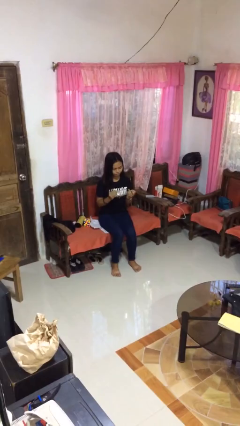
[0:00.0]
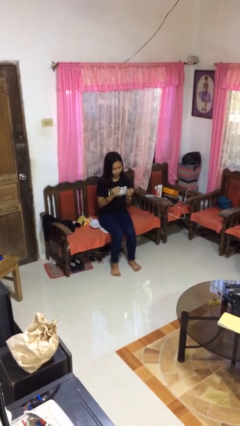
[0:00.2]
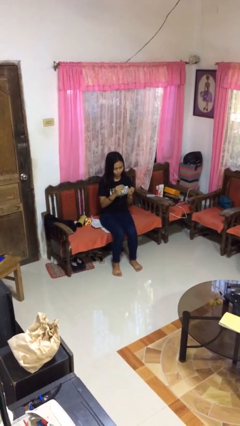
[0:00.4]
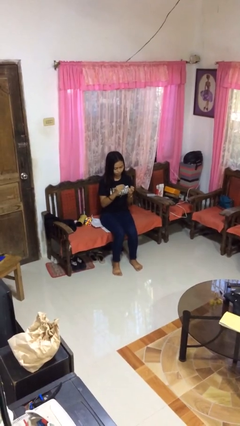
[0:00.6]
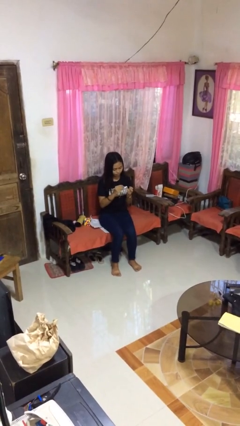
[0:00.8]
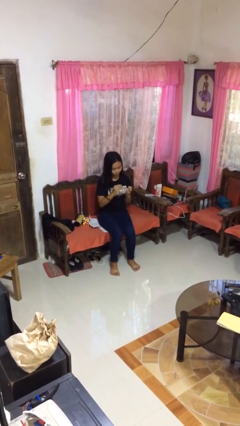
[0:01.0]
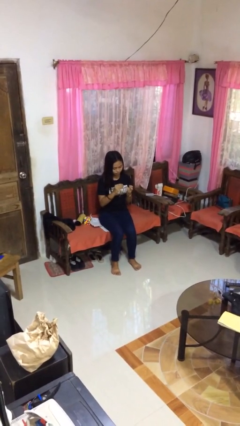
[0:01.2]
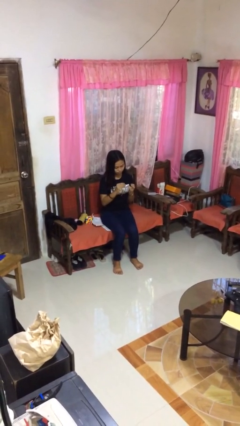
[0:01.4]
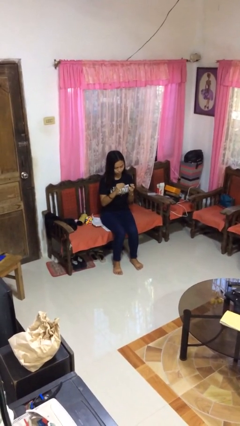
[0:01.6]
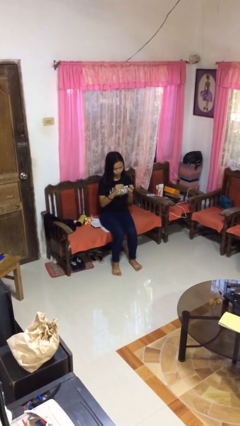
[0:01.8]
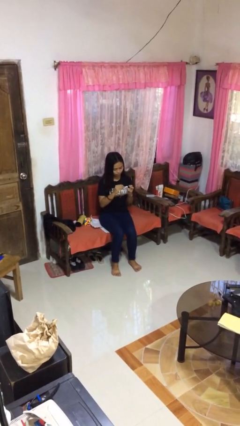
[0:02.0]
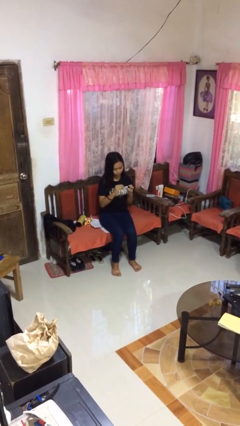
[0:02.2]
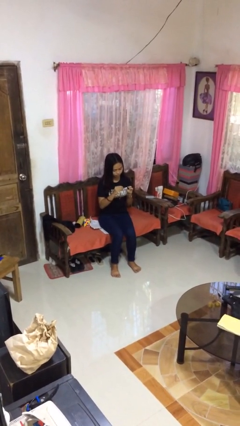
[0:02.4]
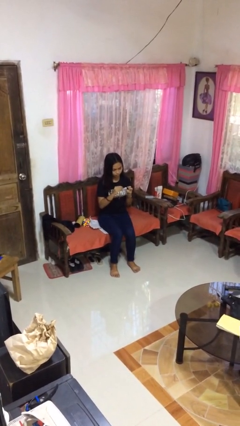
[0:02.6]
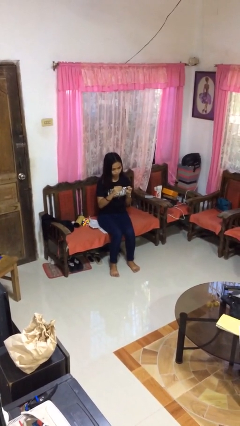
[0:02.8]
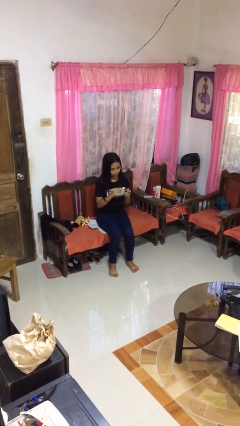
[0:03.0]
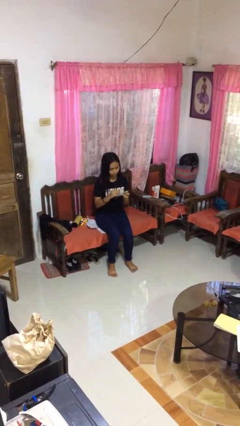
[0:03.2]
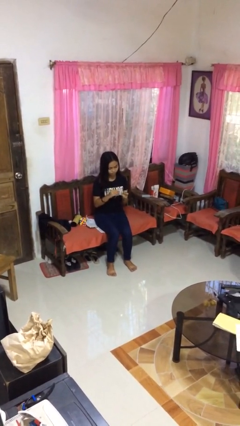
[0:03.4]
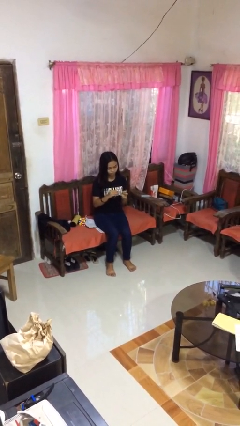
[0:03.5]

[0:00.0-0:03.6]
person clips fingernails

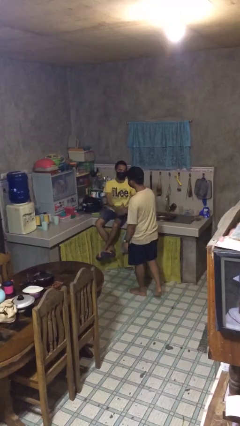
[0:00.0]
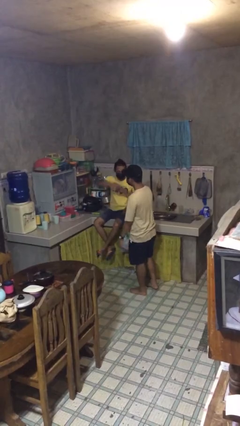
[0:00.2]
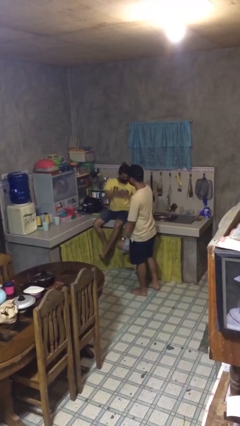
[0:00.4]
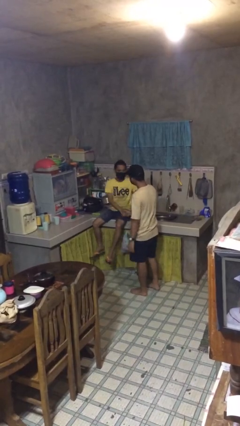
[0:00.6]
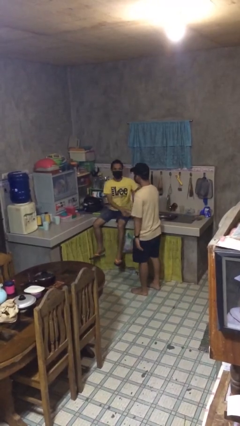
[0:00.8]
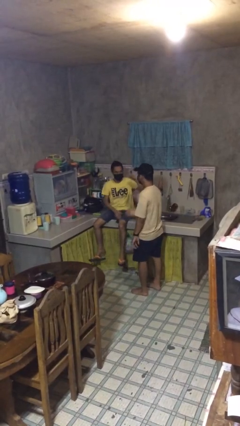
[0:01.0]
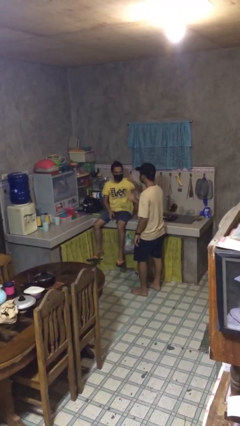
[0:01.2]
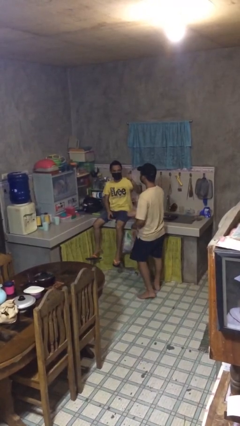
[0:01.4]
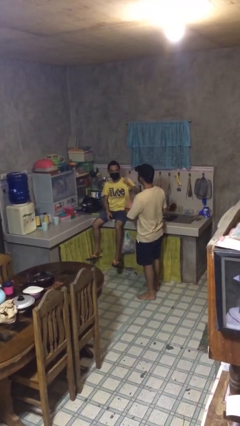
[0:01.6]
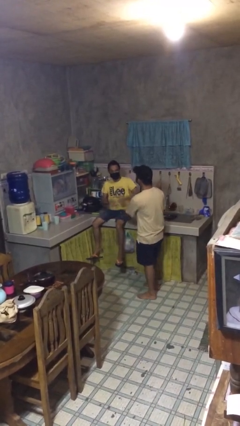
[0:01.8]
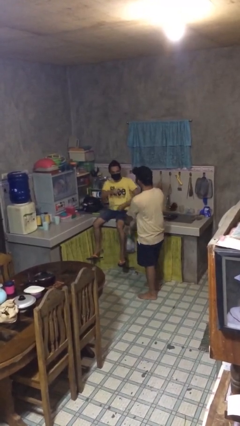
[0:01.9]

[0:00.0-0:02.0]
person shakes hand

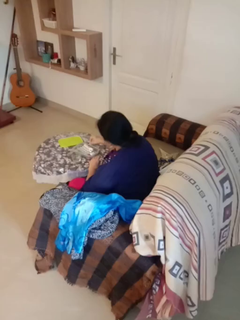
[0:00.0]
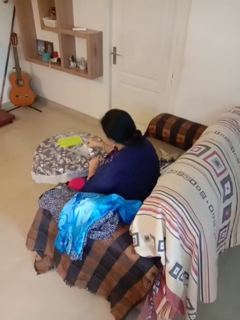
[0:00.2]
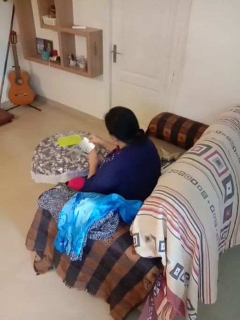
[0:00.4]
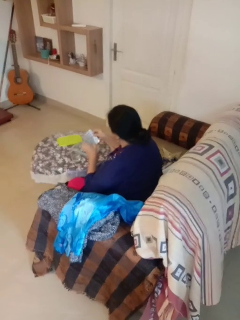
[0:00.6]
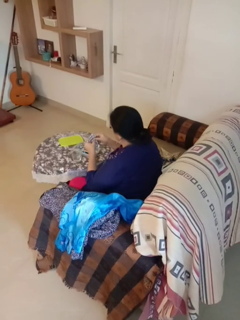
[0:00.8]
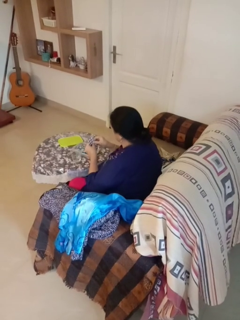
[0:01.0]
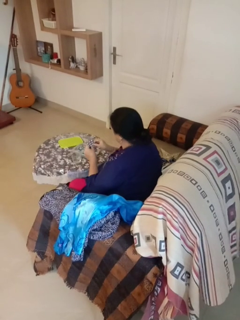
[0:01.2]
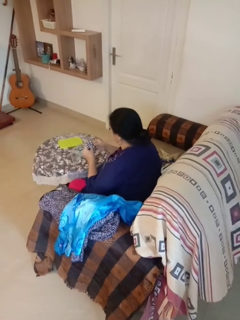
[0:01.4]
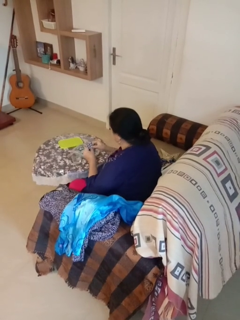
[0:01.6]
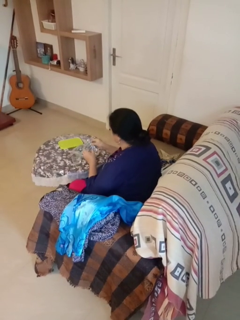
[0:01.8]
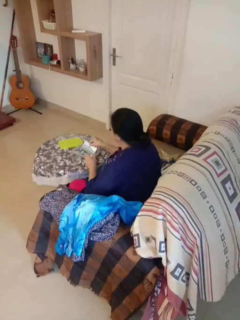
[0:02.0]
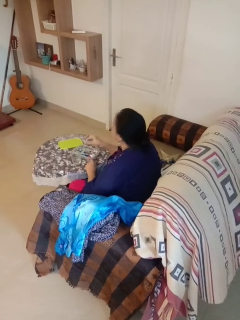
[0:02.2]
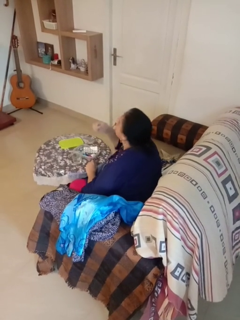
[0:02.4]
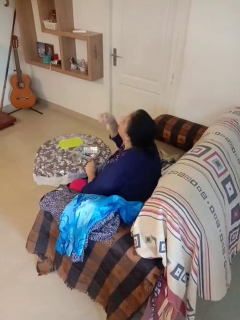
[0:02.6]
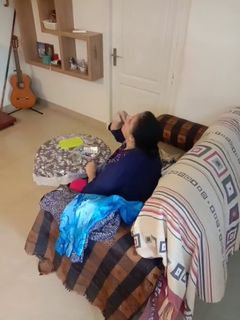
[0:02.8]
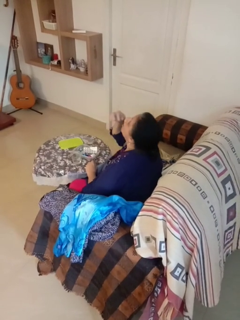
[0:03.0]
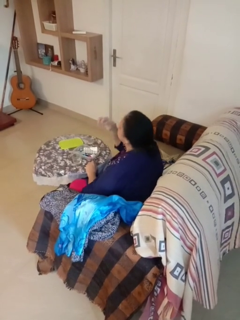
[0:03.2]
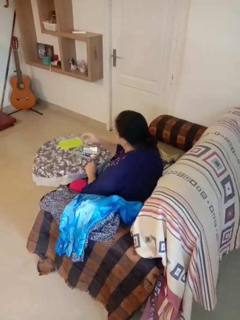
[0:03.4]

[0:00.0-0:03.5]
person takes medicine pills

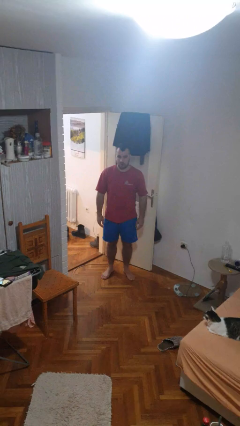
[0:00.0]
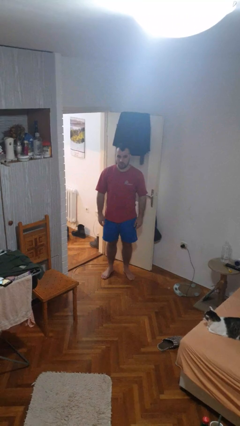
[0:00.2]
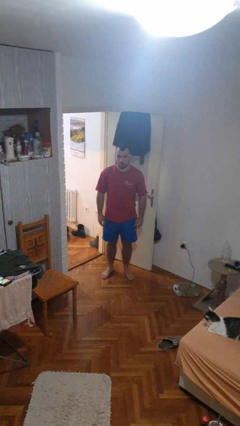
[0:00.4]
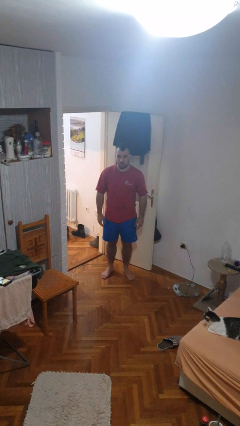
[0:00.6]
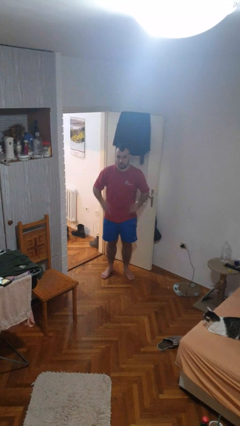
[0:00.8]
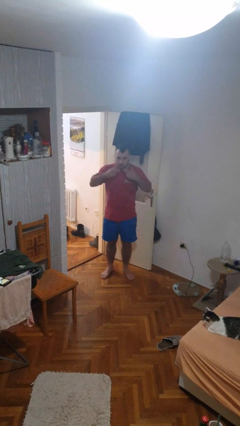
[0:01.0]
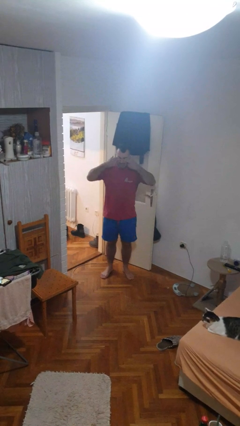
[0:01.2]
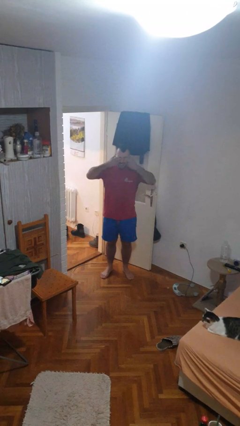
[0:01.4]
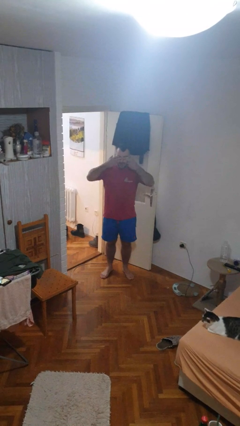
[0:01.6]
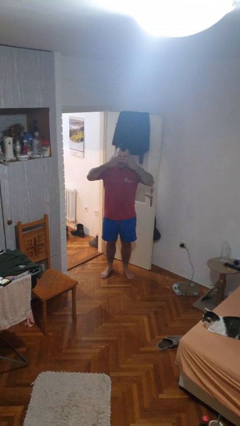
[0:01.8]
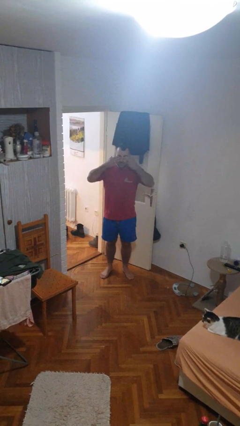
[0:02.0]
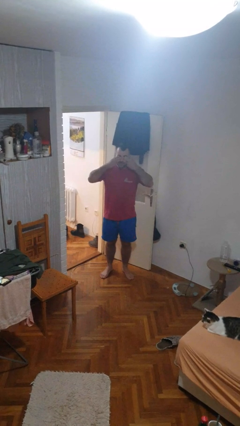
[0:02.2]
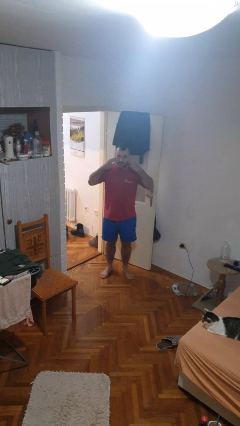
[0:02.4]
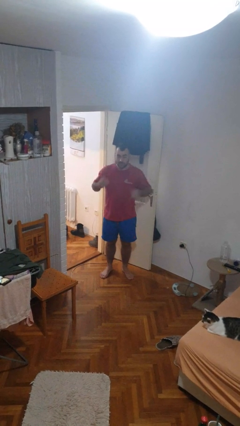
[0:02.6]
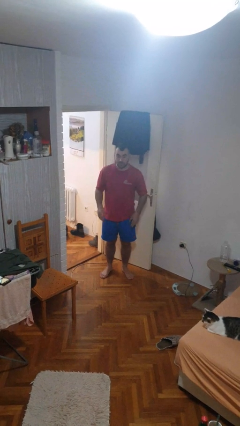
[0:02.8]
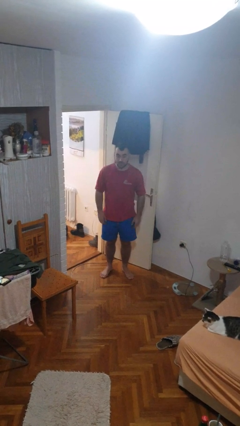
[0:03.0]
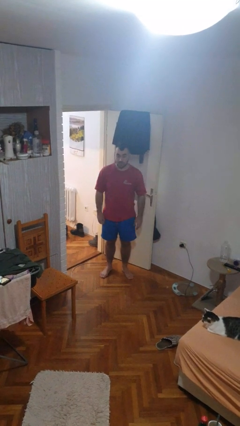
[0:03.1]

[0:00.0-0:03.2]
person rubs eyes

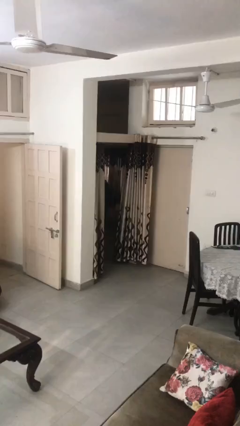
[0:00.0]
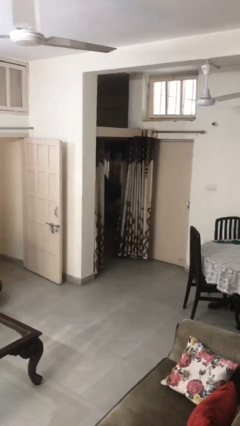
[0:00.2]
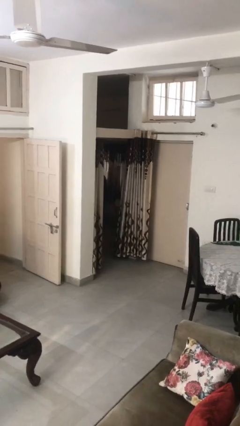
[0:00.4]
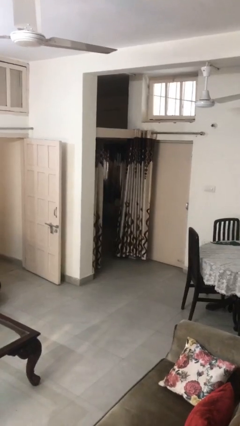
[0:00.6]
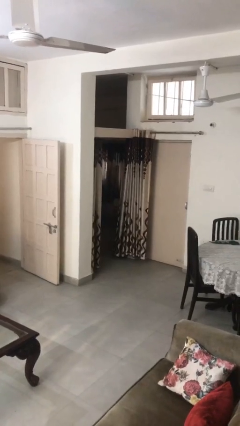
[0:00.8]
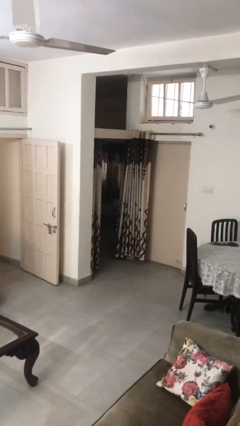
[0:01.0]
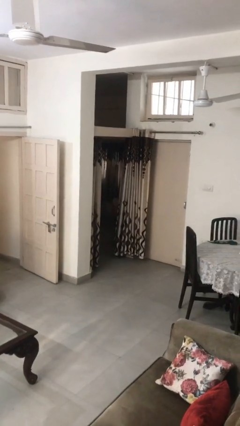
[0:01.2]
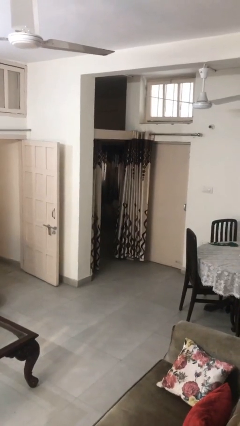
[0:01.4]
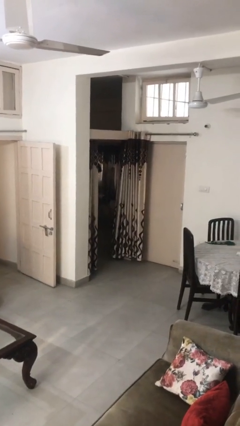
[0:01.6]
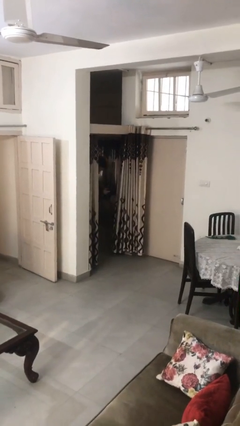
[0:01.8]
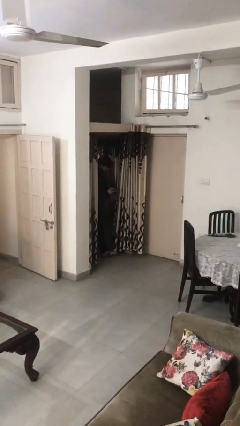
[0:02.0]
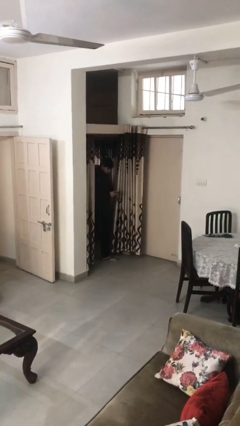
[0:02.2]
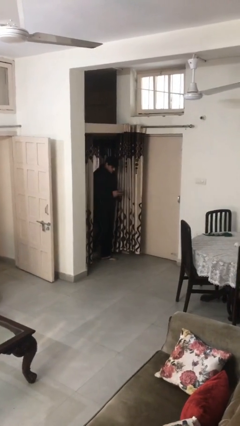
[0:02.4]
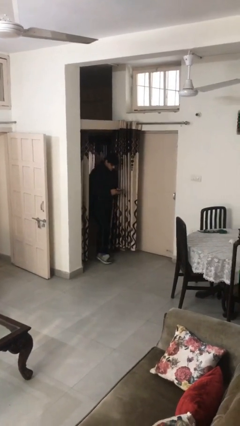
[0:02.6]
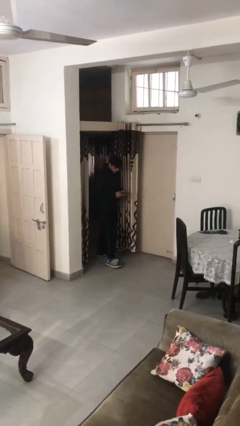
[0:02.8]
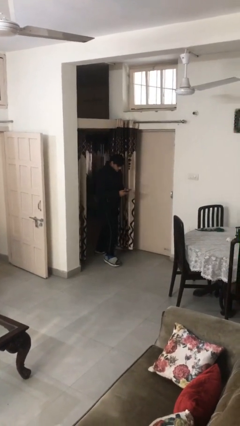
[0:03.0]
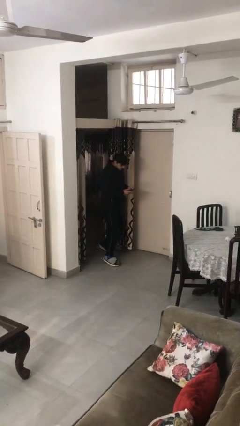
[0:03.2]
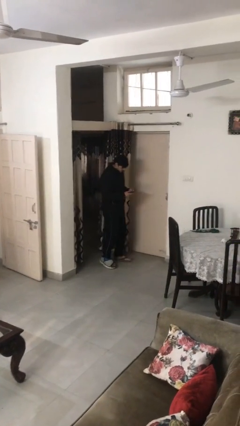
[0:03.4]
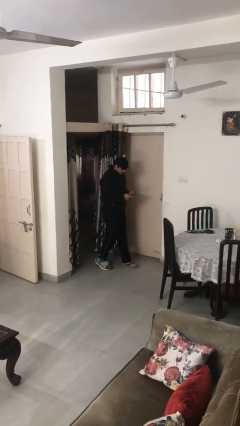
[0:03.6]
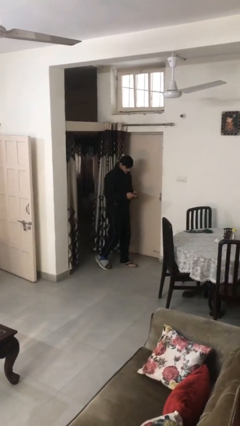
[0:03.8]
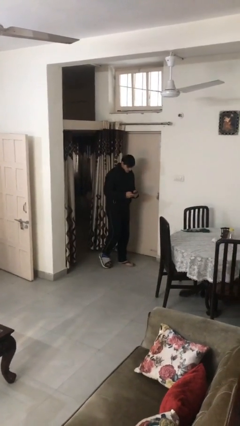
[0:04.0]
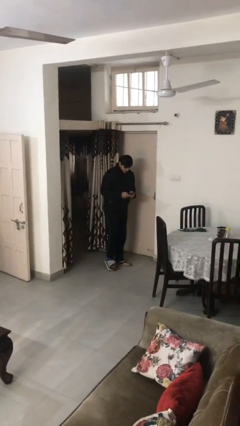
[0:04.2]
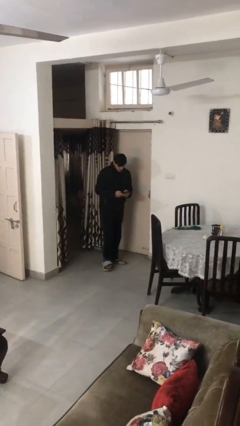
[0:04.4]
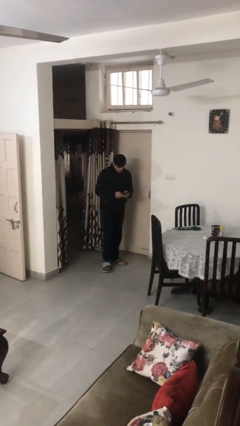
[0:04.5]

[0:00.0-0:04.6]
person enters scene through structure

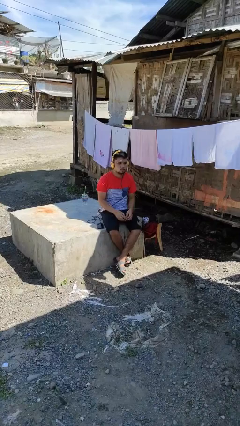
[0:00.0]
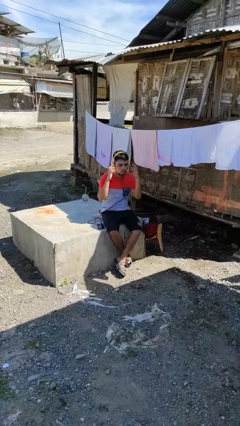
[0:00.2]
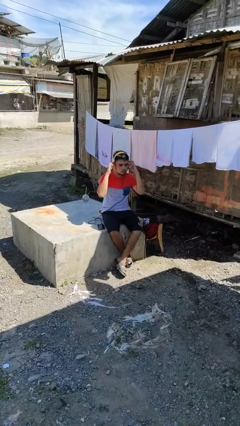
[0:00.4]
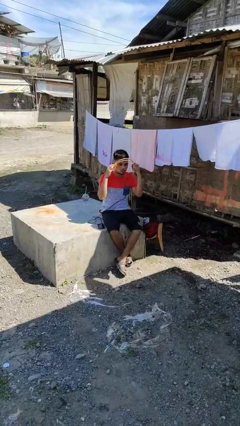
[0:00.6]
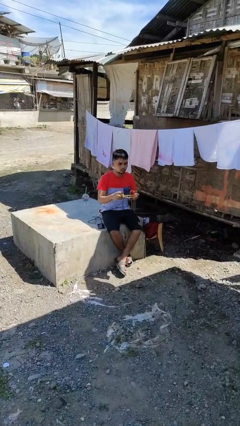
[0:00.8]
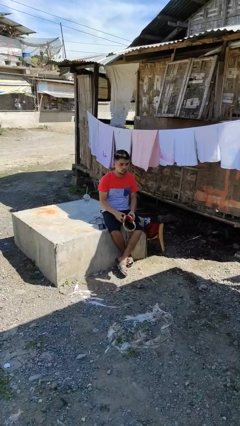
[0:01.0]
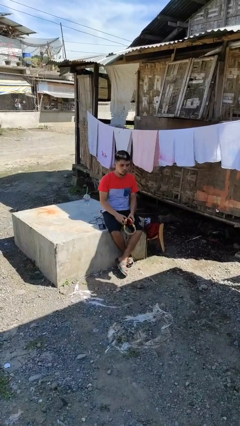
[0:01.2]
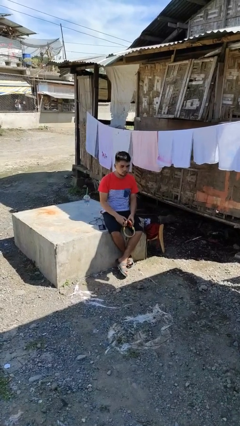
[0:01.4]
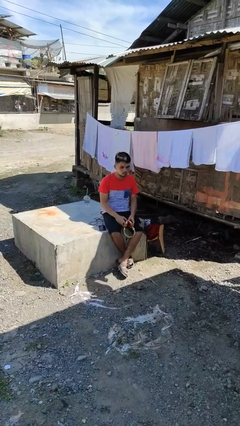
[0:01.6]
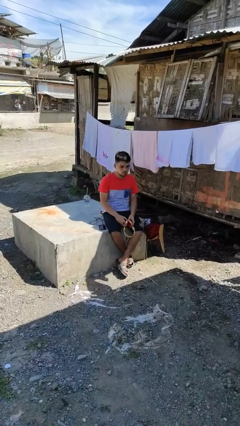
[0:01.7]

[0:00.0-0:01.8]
person takes off headphones
